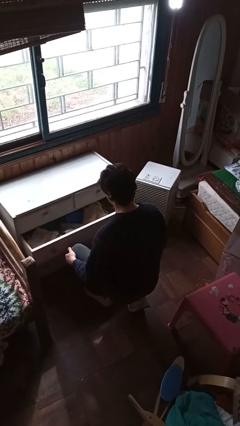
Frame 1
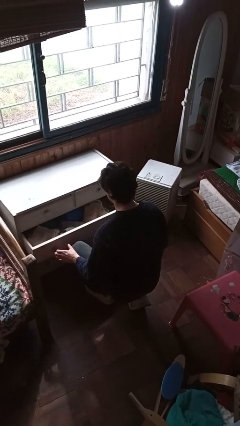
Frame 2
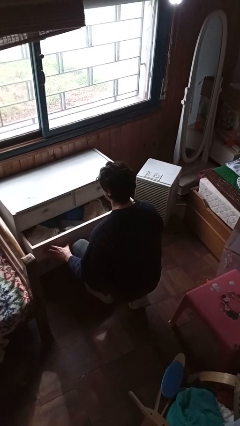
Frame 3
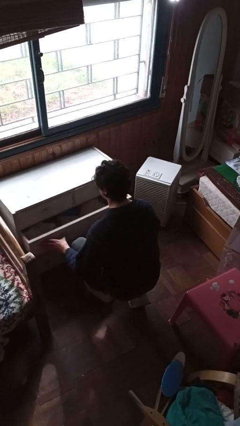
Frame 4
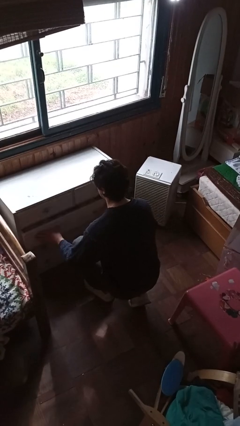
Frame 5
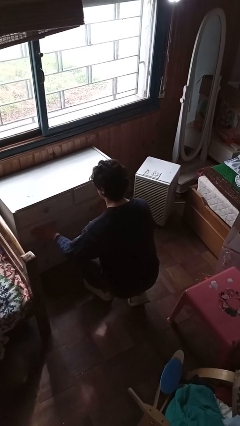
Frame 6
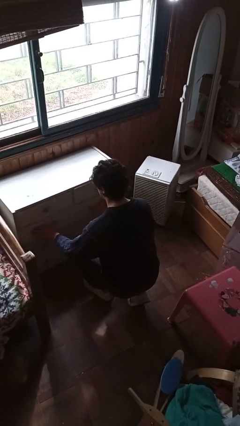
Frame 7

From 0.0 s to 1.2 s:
person closes dresser drawer

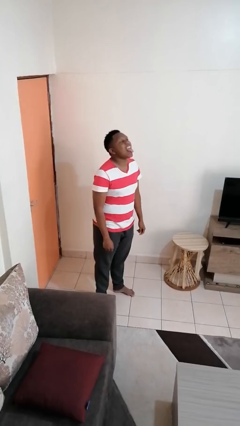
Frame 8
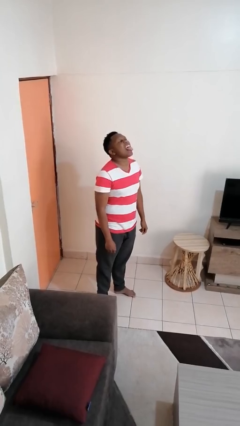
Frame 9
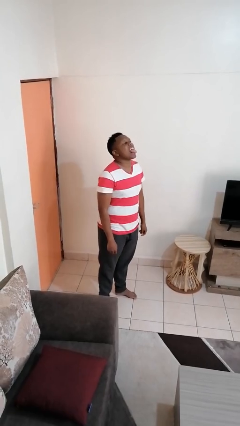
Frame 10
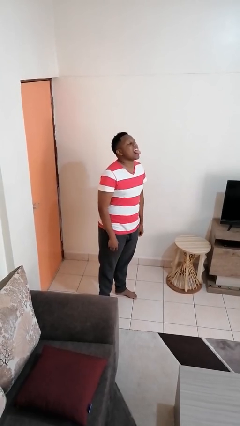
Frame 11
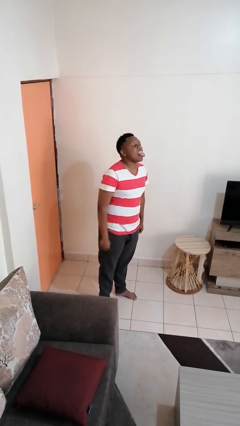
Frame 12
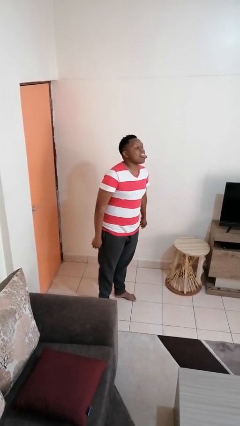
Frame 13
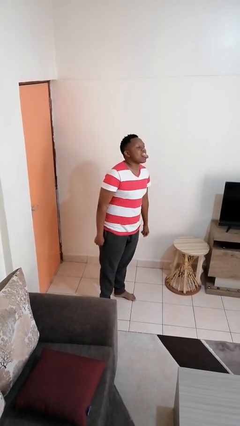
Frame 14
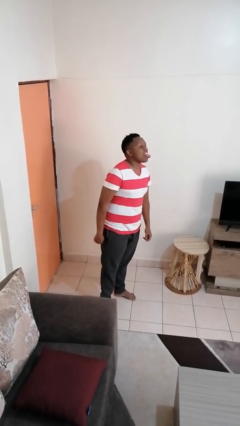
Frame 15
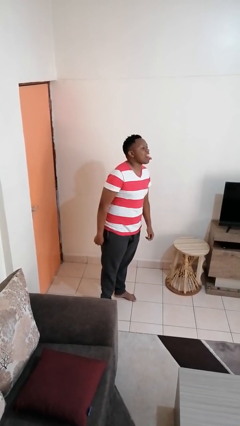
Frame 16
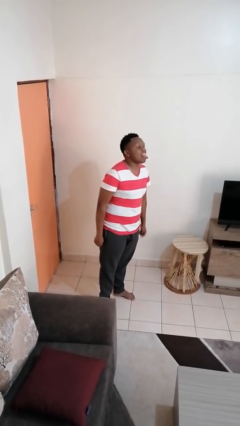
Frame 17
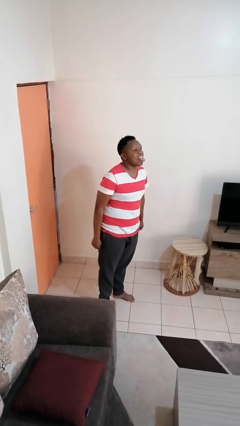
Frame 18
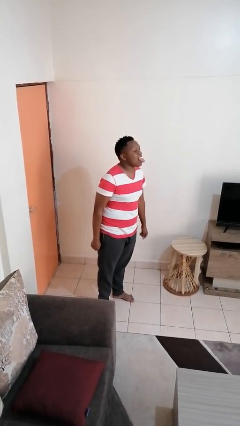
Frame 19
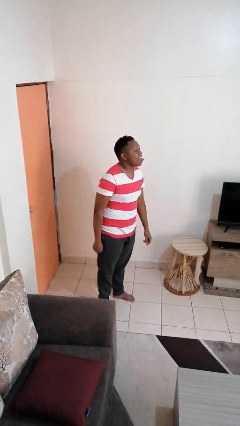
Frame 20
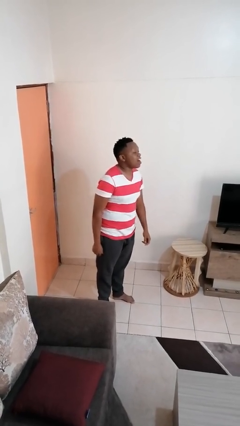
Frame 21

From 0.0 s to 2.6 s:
person sticks out tongue

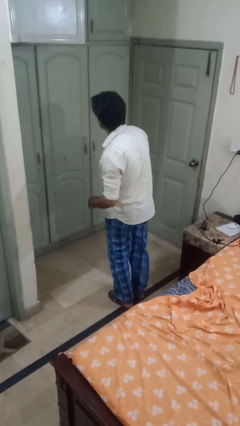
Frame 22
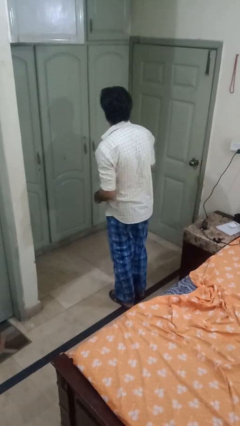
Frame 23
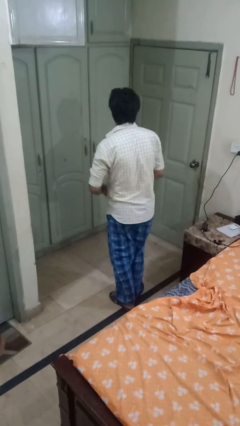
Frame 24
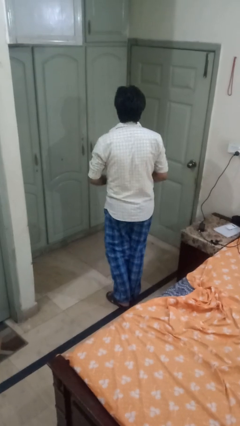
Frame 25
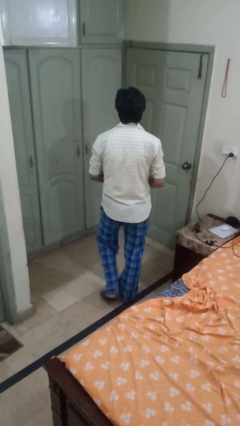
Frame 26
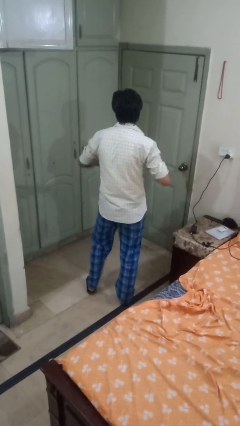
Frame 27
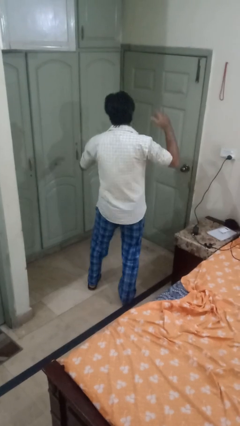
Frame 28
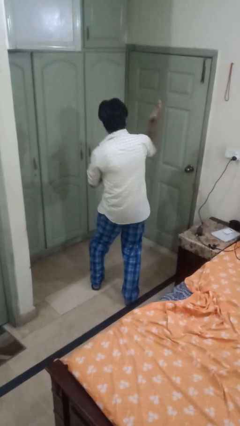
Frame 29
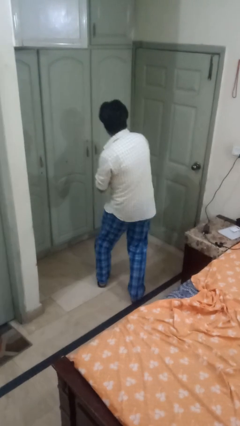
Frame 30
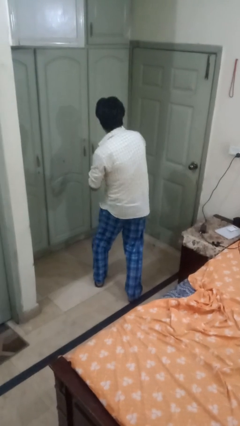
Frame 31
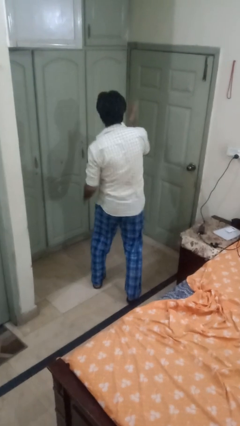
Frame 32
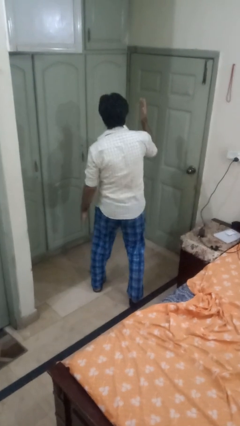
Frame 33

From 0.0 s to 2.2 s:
person karate chop

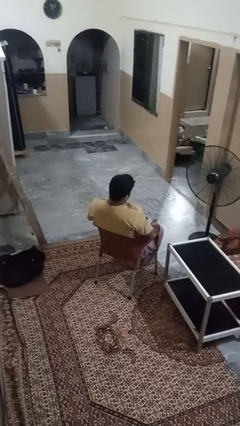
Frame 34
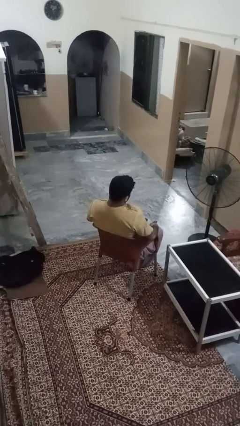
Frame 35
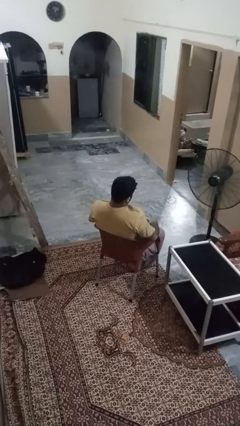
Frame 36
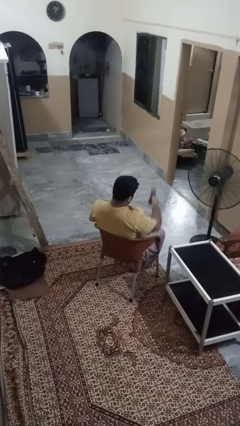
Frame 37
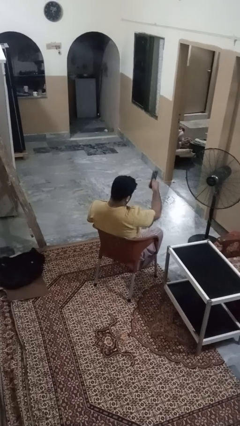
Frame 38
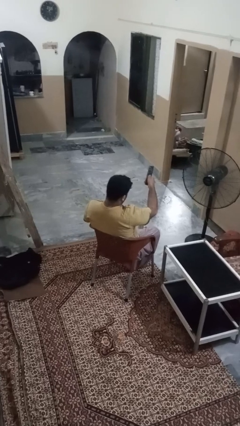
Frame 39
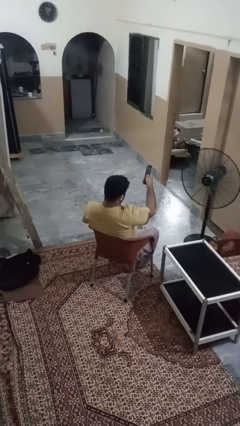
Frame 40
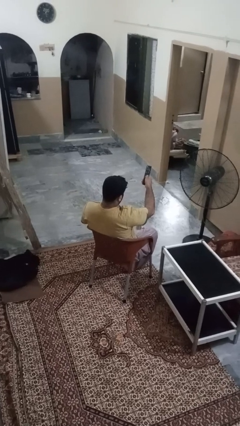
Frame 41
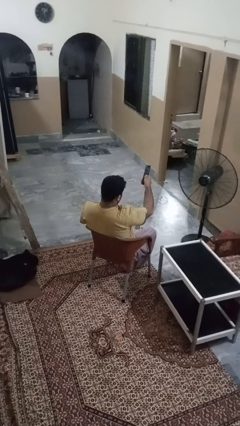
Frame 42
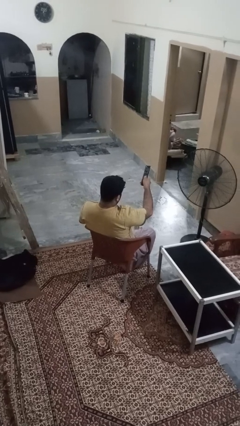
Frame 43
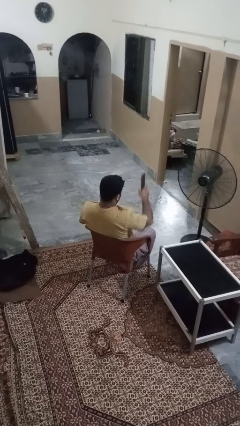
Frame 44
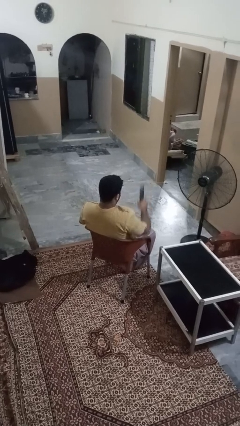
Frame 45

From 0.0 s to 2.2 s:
person uses television remote

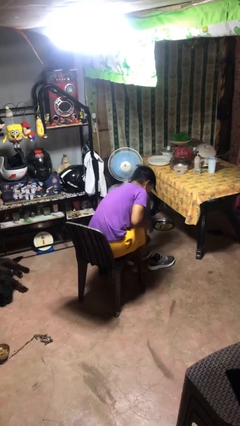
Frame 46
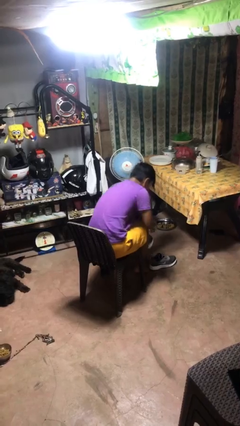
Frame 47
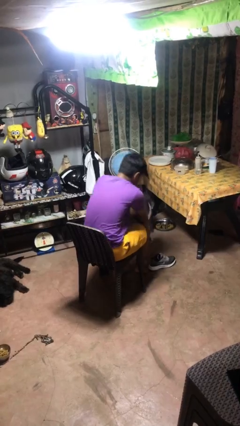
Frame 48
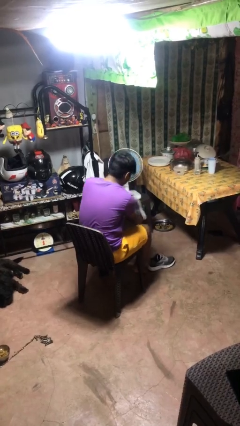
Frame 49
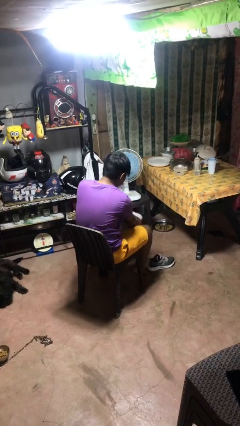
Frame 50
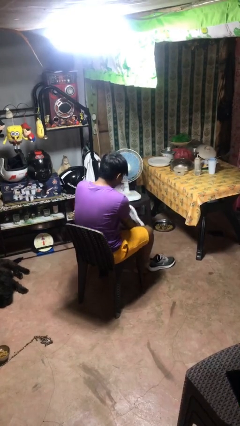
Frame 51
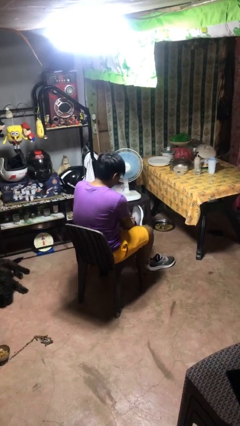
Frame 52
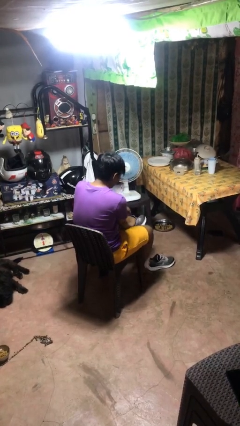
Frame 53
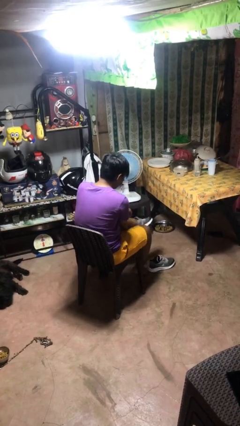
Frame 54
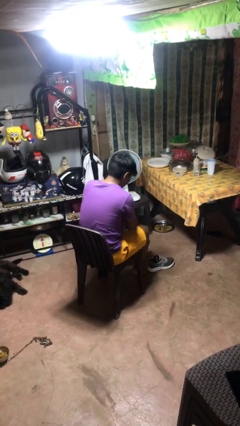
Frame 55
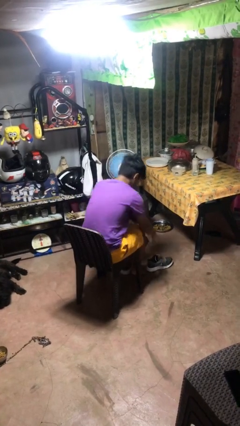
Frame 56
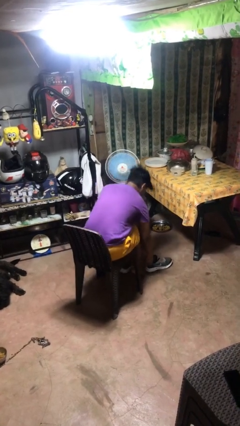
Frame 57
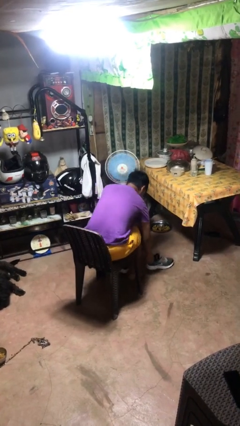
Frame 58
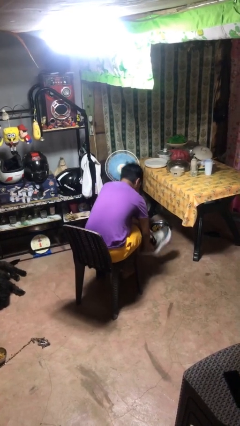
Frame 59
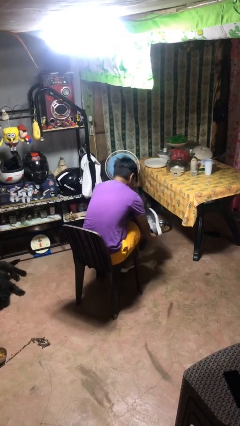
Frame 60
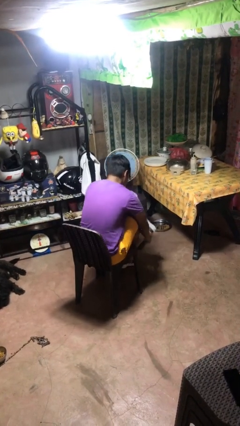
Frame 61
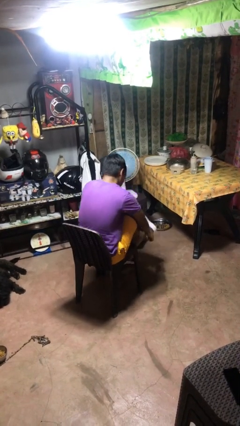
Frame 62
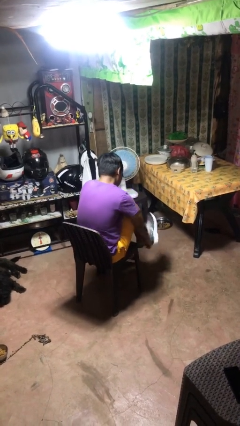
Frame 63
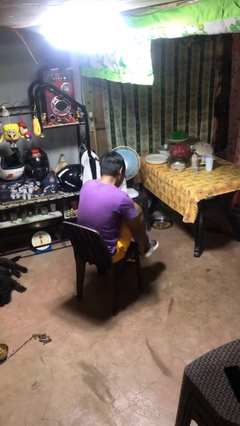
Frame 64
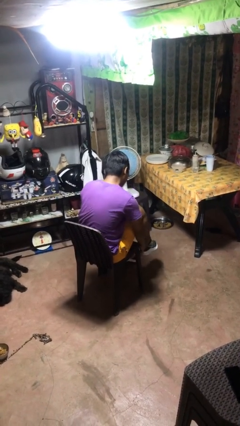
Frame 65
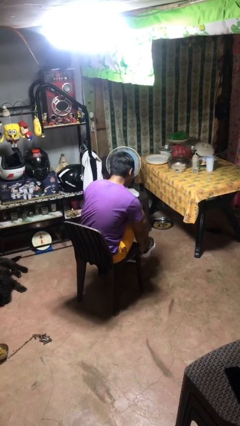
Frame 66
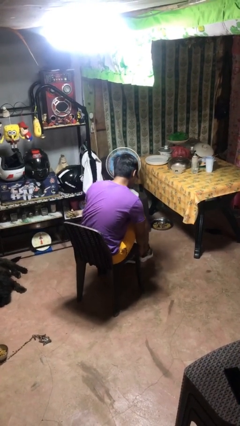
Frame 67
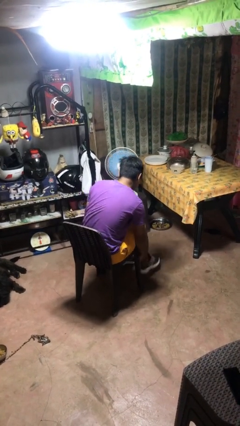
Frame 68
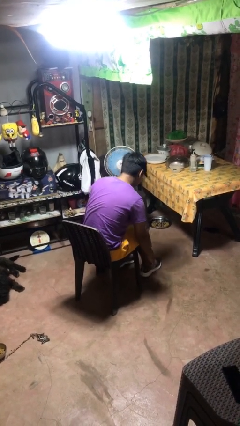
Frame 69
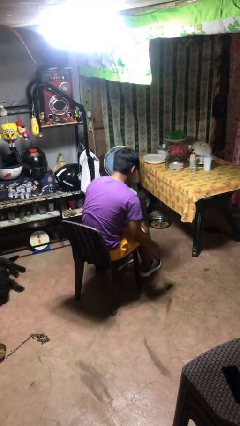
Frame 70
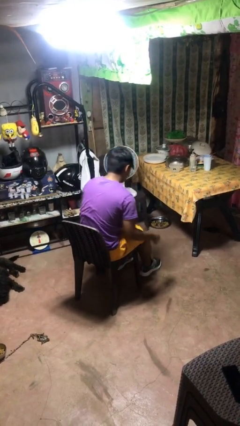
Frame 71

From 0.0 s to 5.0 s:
person puts on shoes

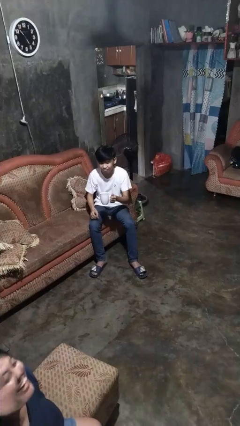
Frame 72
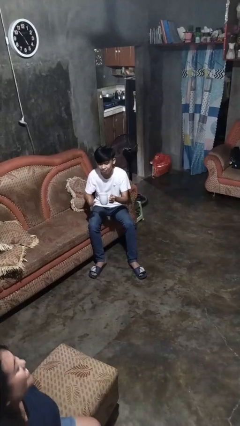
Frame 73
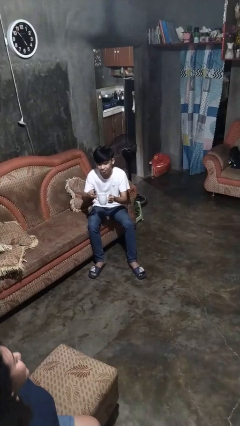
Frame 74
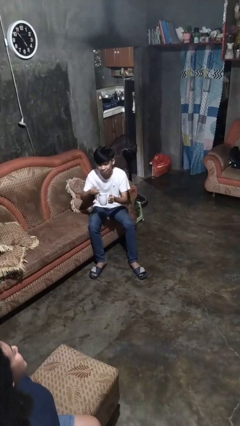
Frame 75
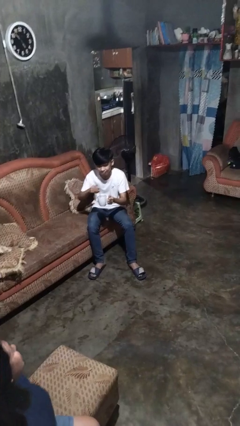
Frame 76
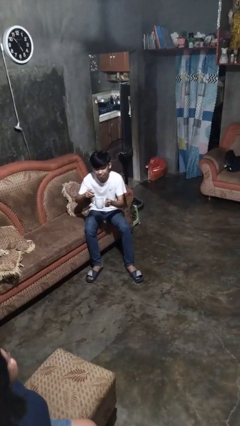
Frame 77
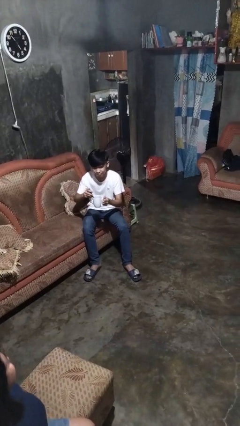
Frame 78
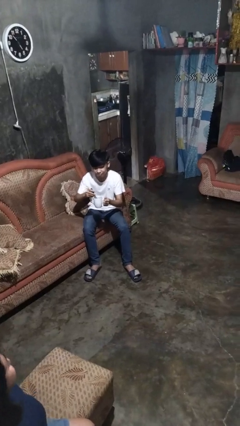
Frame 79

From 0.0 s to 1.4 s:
person stirs mug

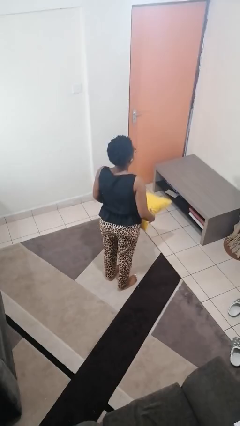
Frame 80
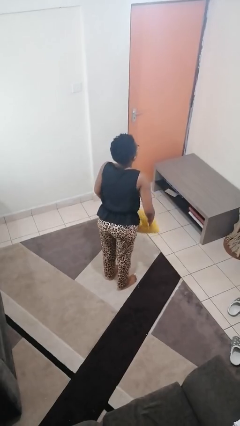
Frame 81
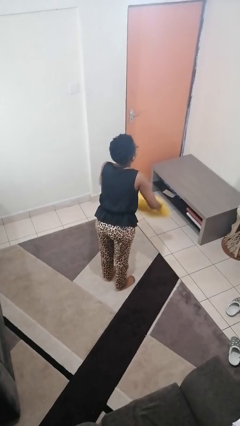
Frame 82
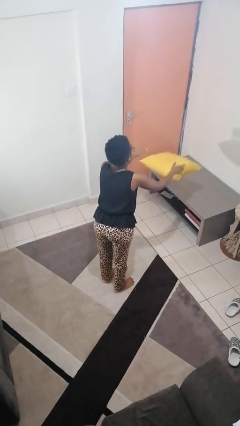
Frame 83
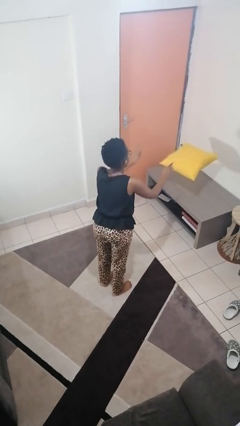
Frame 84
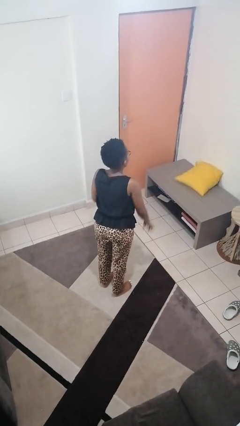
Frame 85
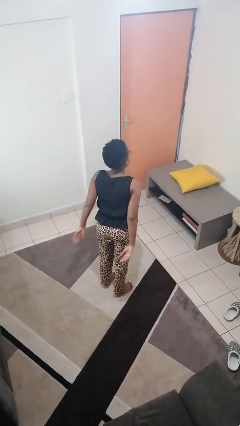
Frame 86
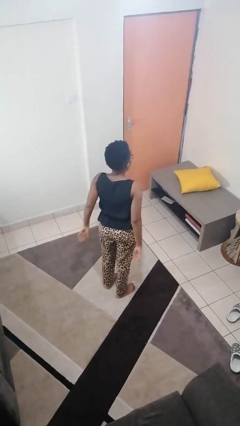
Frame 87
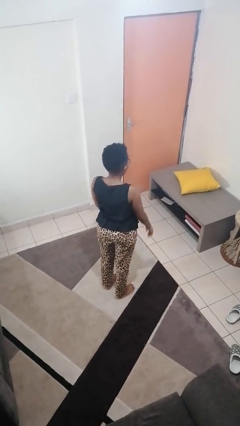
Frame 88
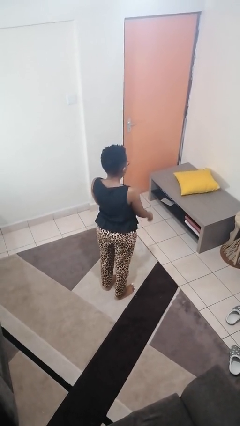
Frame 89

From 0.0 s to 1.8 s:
person throws object on table
